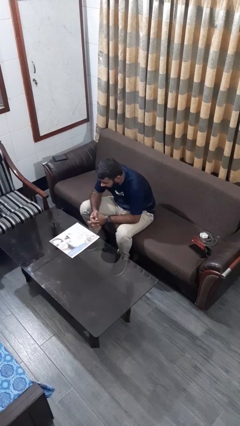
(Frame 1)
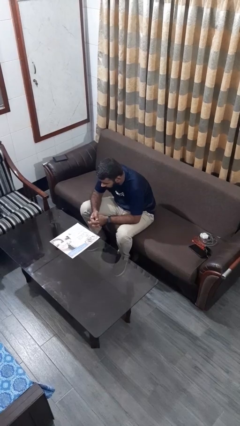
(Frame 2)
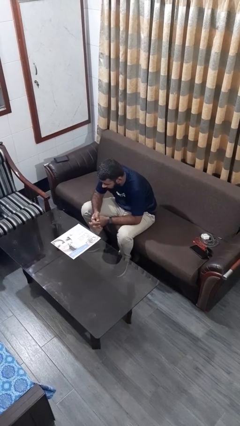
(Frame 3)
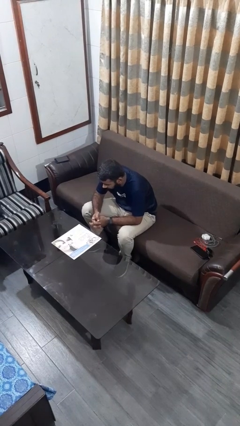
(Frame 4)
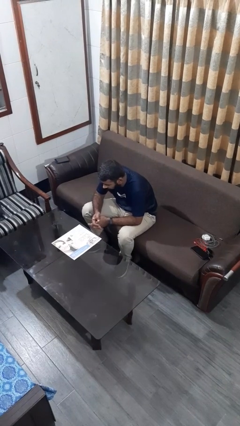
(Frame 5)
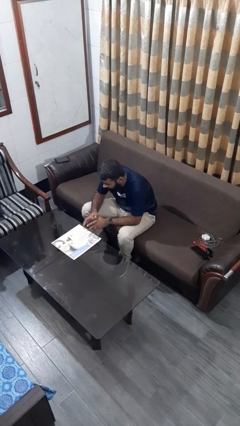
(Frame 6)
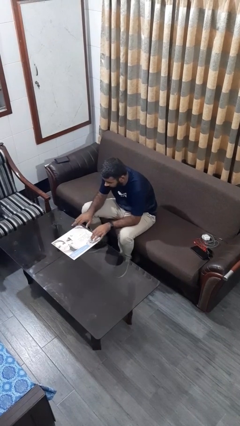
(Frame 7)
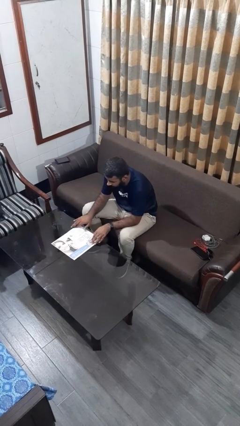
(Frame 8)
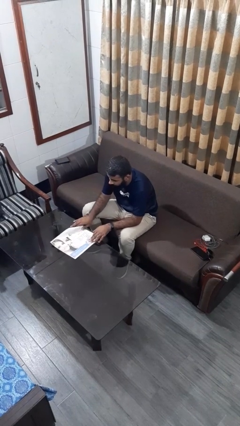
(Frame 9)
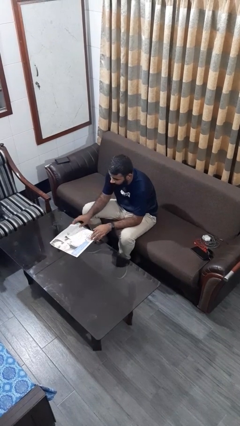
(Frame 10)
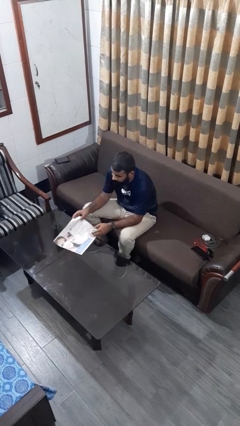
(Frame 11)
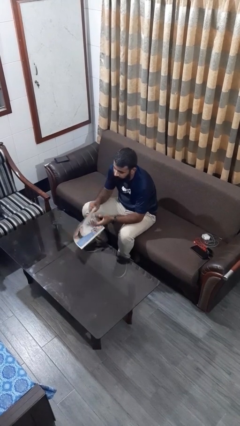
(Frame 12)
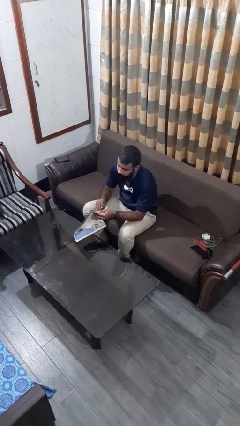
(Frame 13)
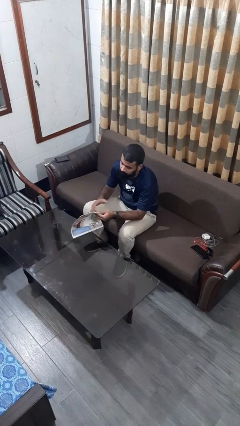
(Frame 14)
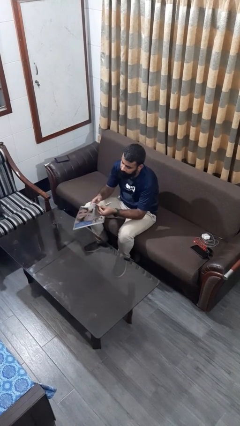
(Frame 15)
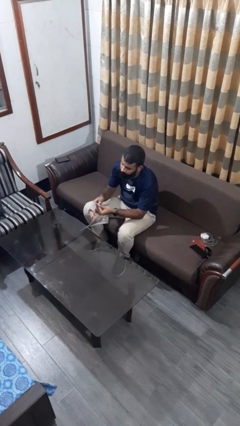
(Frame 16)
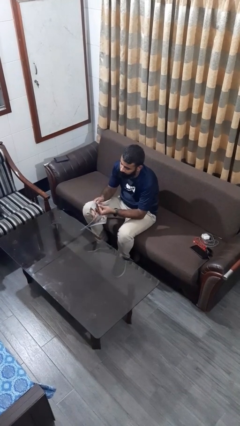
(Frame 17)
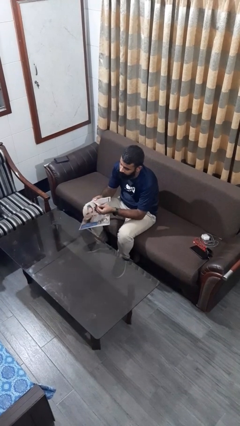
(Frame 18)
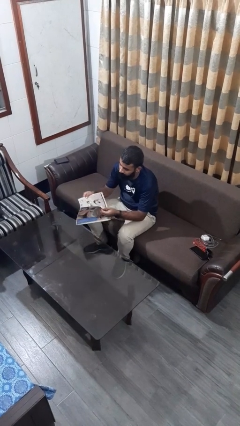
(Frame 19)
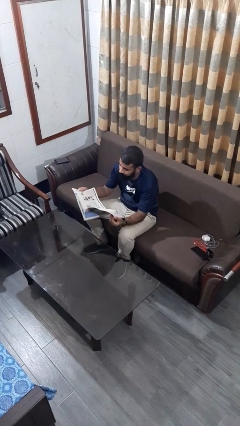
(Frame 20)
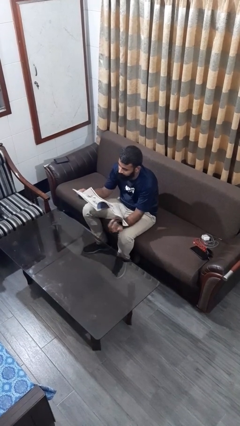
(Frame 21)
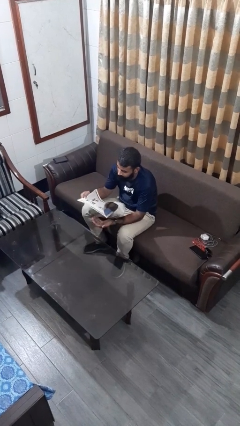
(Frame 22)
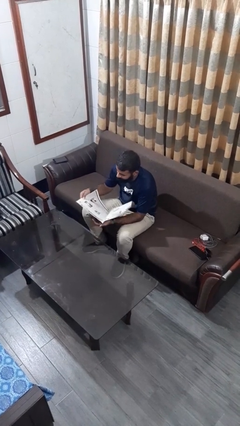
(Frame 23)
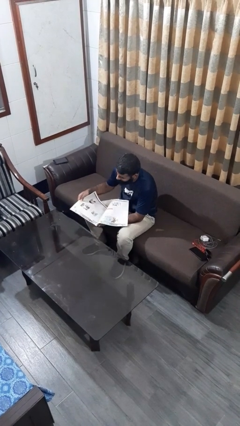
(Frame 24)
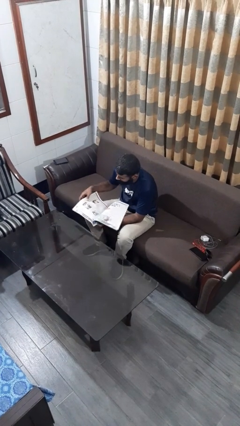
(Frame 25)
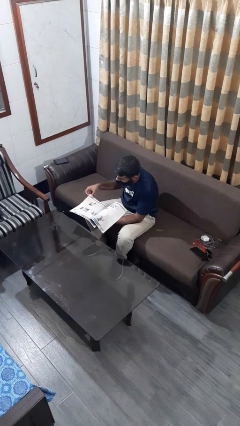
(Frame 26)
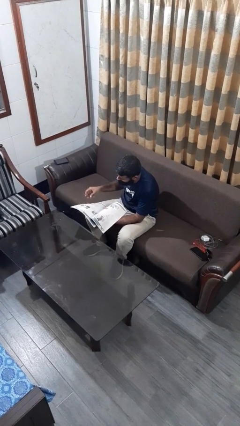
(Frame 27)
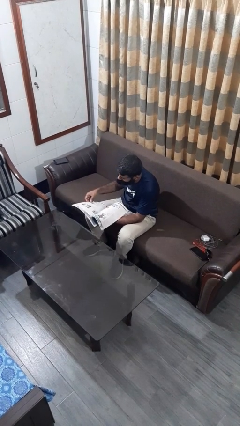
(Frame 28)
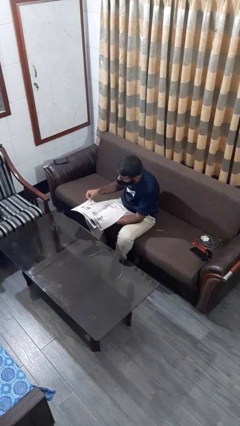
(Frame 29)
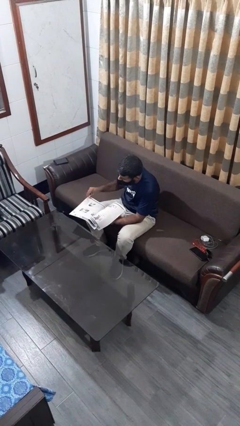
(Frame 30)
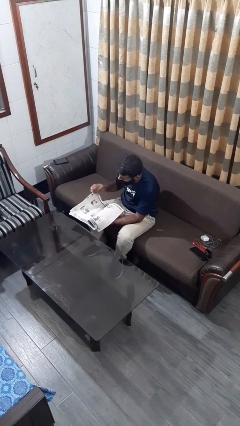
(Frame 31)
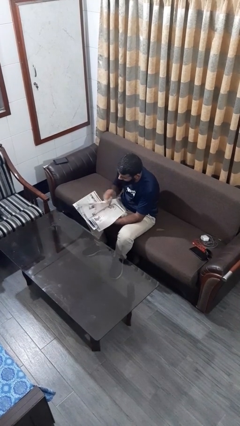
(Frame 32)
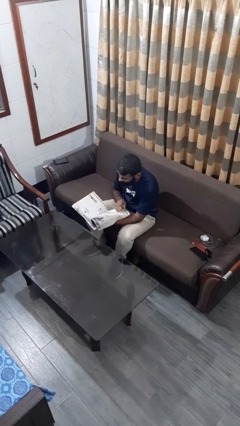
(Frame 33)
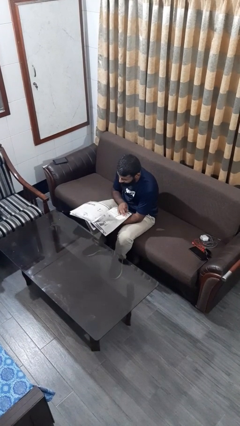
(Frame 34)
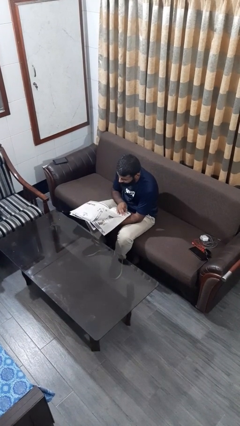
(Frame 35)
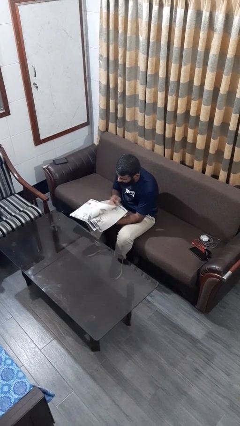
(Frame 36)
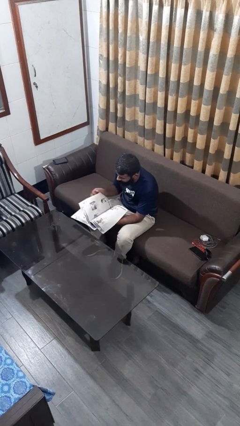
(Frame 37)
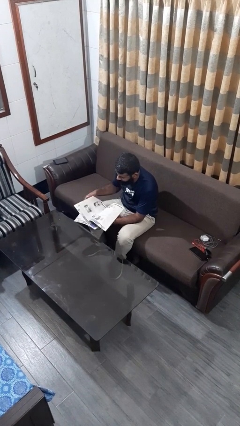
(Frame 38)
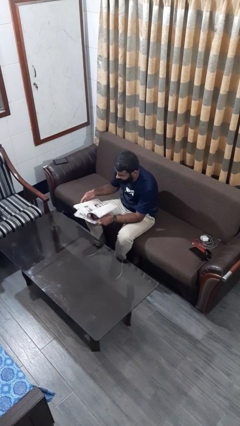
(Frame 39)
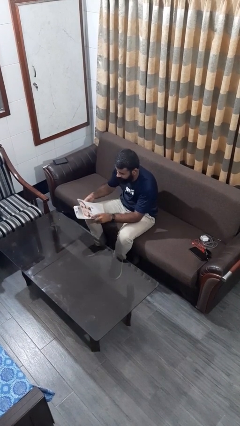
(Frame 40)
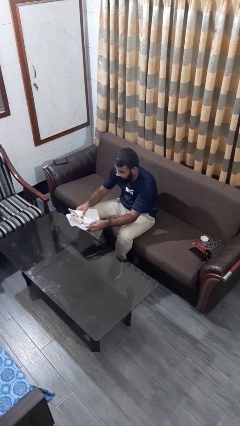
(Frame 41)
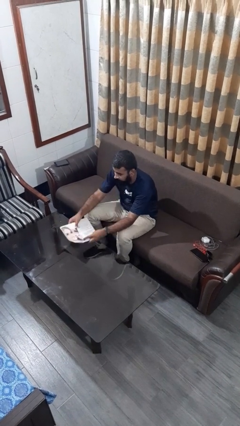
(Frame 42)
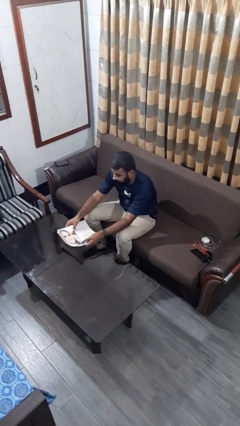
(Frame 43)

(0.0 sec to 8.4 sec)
person reads magazine

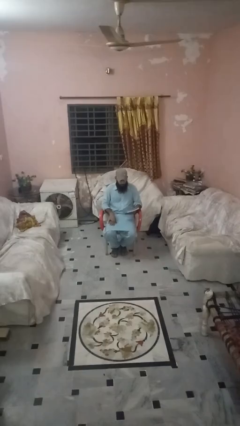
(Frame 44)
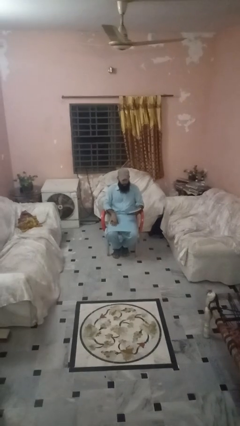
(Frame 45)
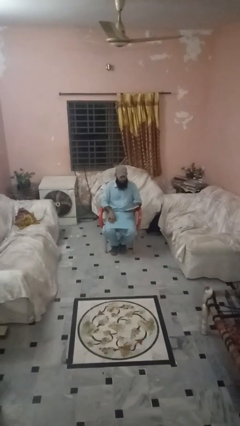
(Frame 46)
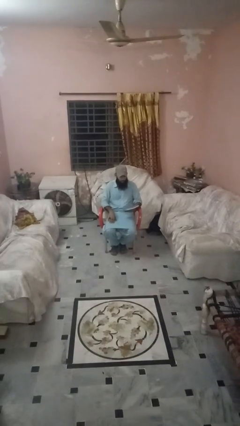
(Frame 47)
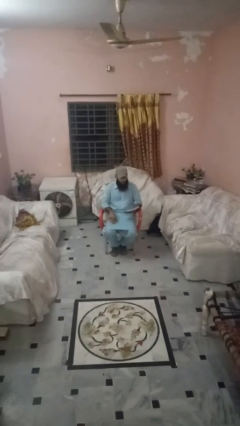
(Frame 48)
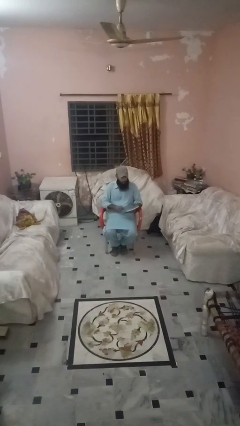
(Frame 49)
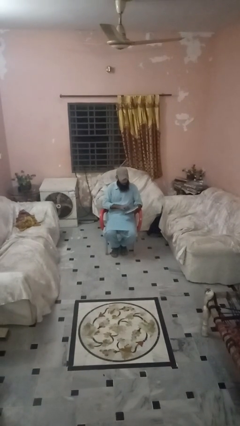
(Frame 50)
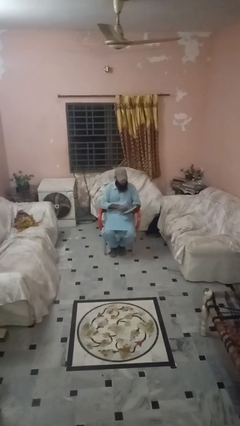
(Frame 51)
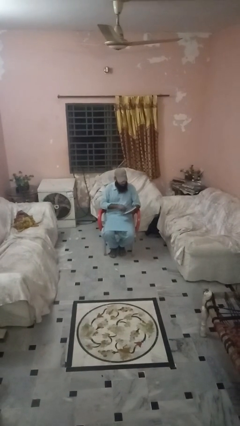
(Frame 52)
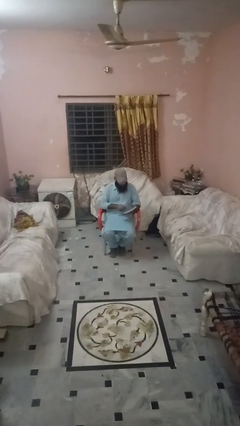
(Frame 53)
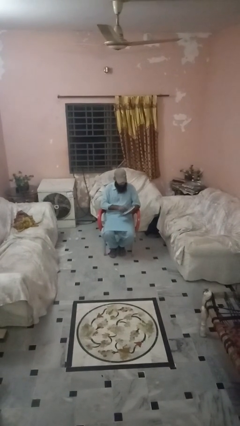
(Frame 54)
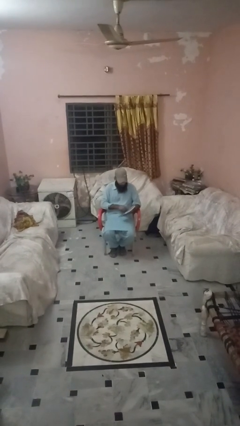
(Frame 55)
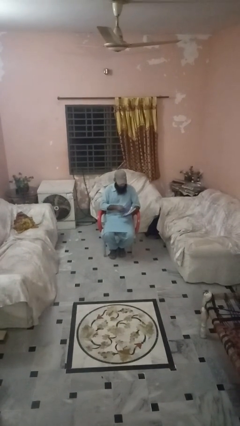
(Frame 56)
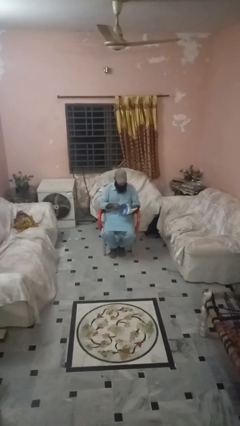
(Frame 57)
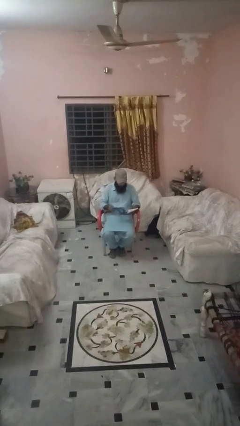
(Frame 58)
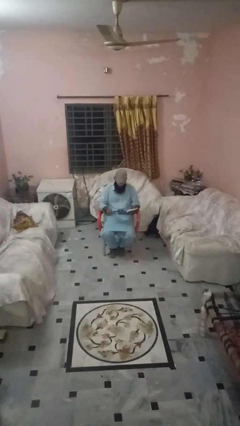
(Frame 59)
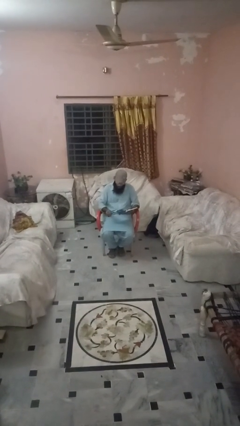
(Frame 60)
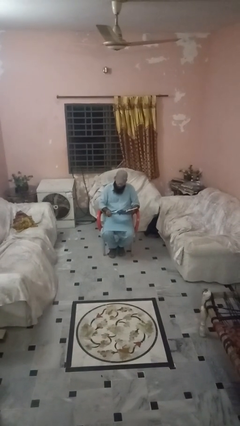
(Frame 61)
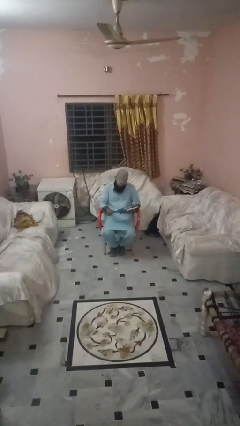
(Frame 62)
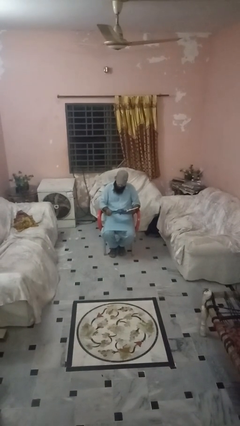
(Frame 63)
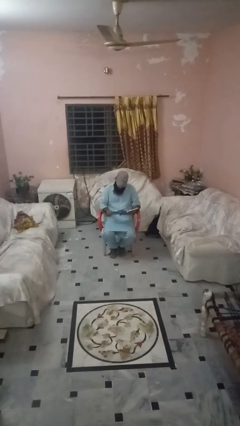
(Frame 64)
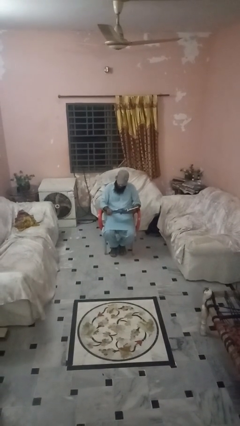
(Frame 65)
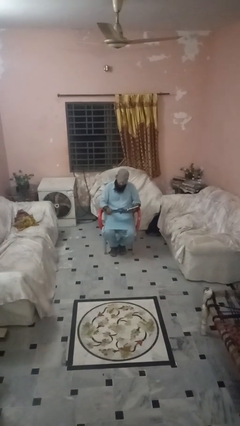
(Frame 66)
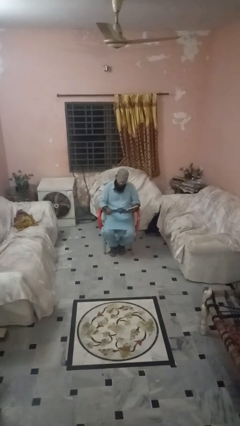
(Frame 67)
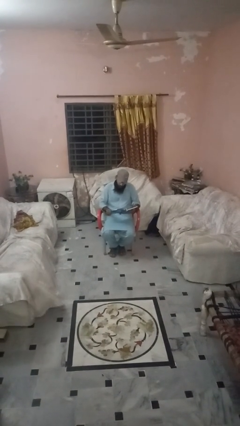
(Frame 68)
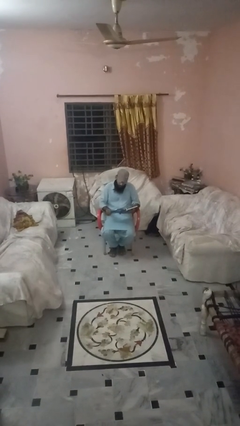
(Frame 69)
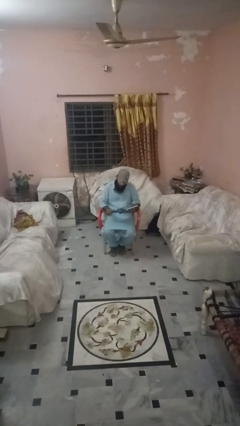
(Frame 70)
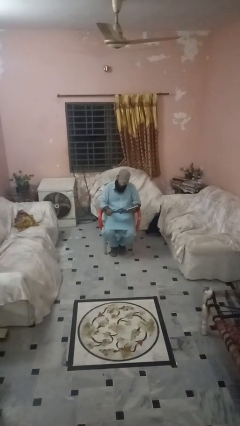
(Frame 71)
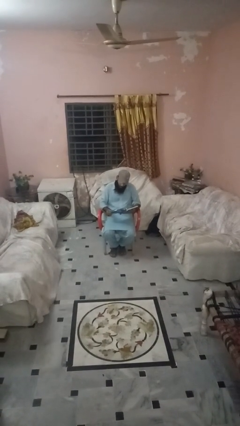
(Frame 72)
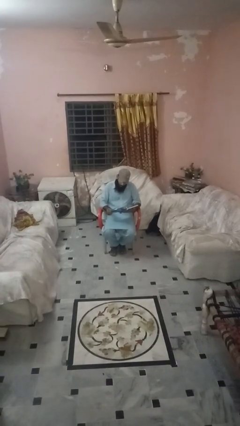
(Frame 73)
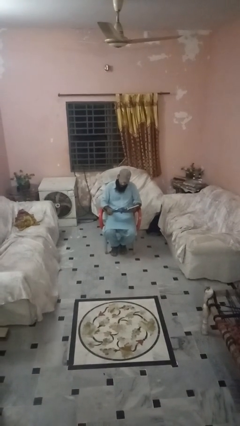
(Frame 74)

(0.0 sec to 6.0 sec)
person reads book

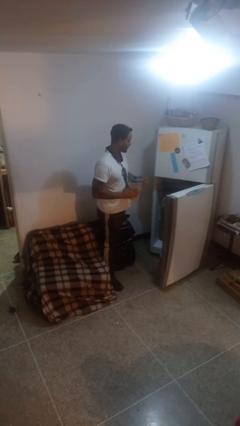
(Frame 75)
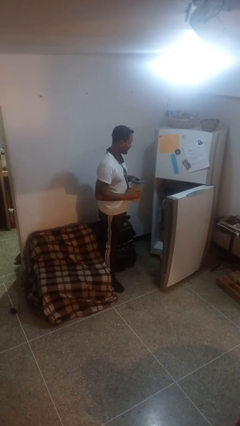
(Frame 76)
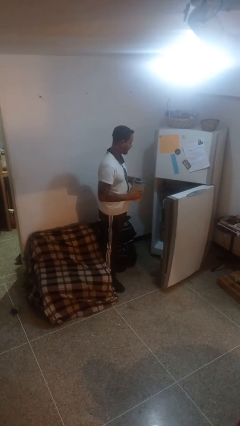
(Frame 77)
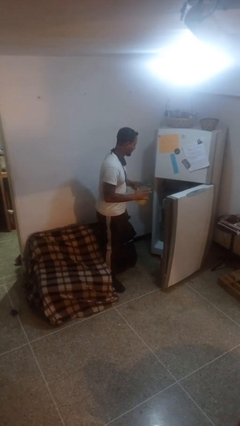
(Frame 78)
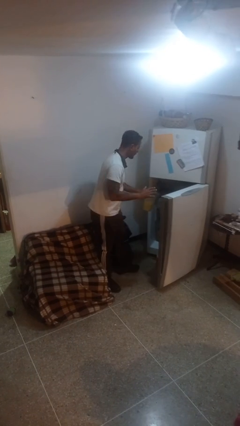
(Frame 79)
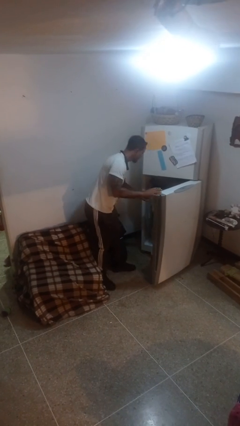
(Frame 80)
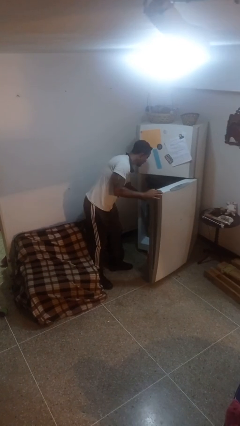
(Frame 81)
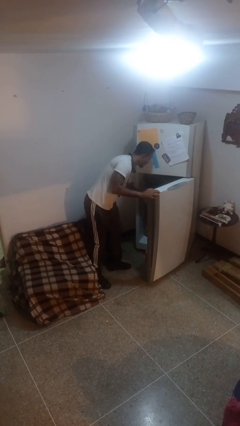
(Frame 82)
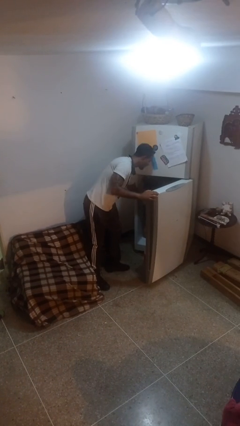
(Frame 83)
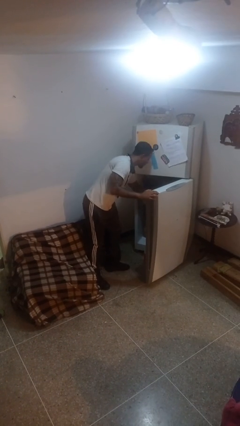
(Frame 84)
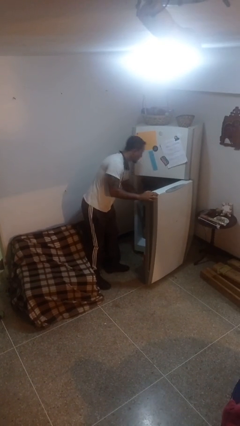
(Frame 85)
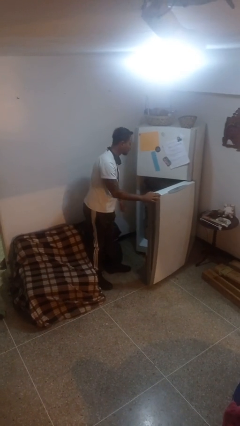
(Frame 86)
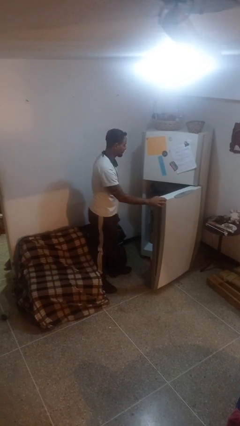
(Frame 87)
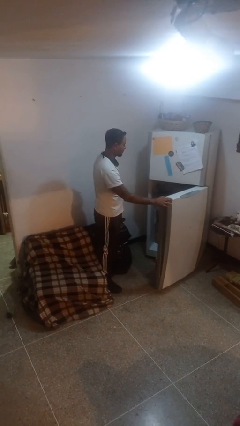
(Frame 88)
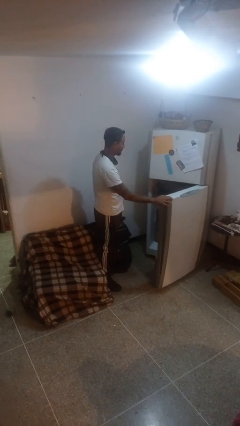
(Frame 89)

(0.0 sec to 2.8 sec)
person puts object into refrigerator

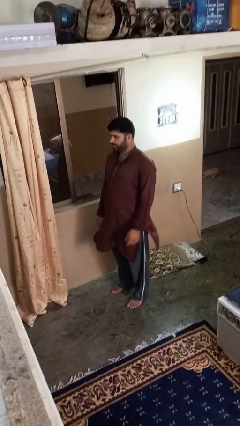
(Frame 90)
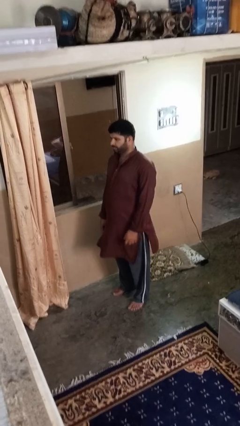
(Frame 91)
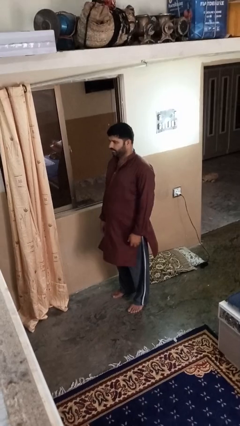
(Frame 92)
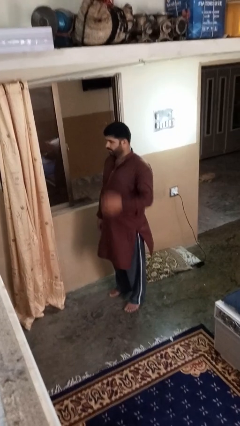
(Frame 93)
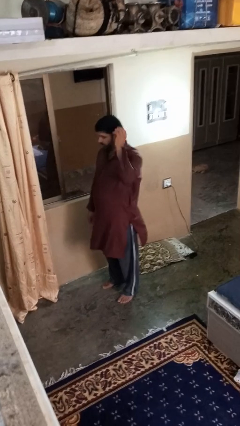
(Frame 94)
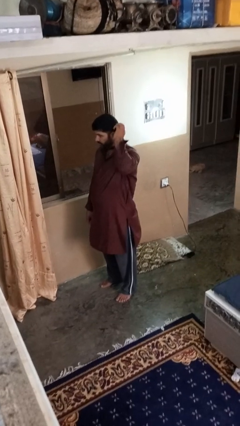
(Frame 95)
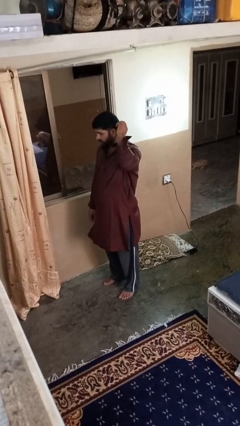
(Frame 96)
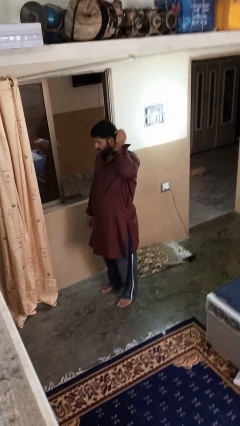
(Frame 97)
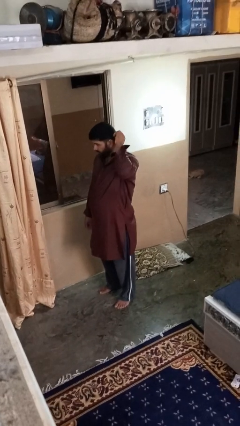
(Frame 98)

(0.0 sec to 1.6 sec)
person strokes hair
